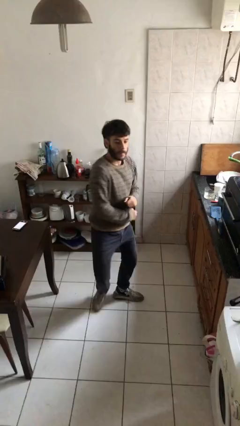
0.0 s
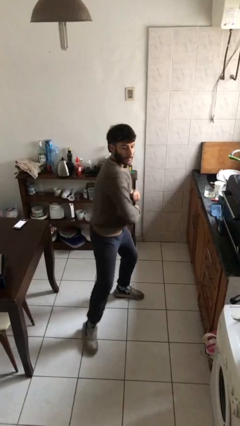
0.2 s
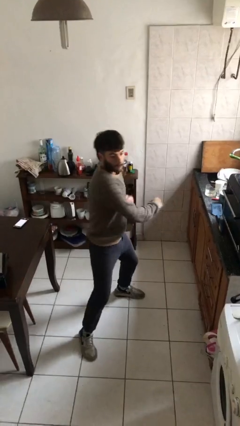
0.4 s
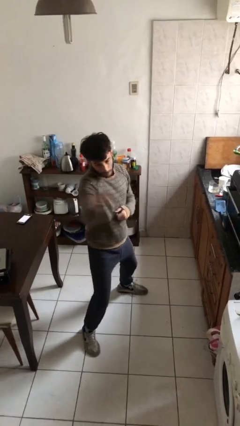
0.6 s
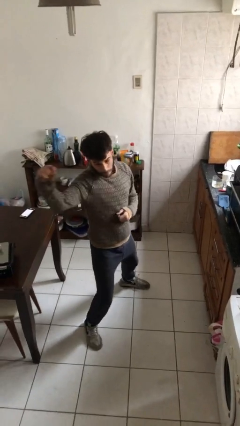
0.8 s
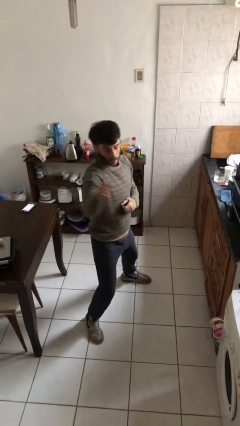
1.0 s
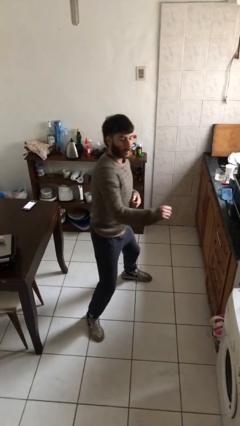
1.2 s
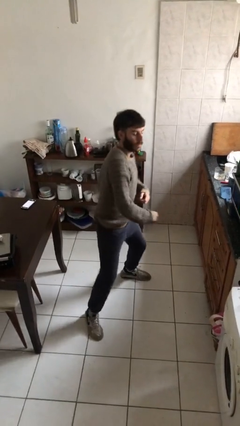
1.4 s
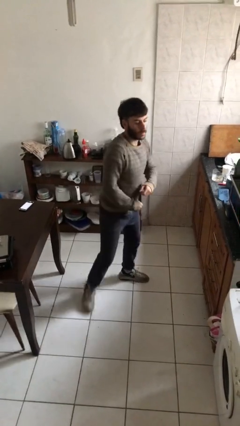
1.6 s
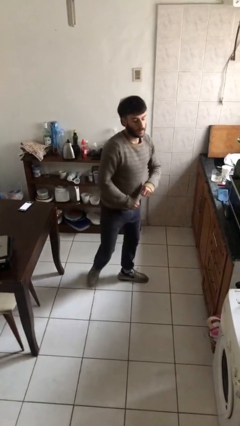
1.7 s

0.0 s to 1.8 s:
person karate chop

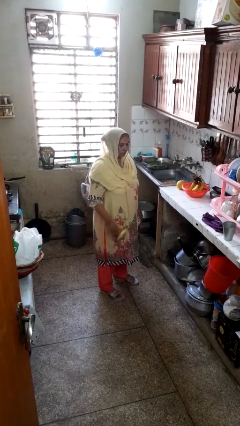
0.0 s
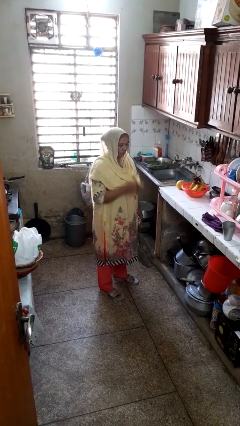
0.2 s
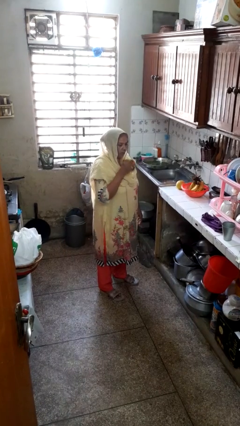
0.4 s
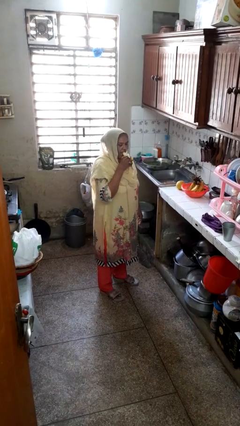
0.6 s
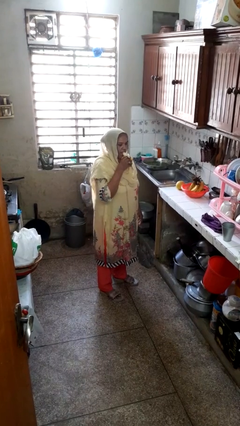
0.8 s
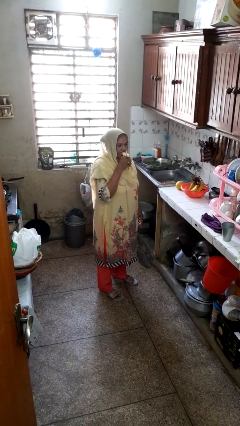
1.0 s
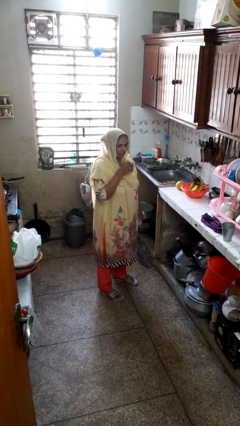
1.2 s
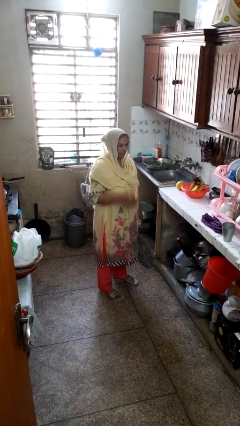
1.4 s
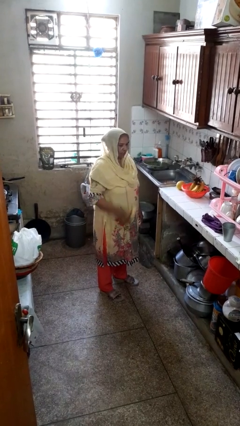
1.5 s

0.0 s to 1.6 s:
person eats banana

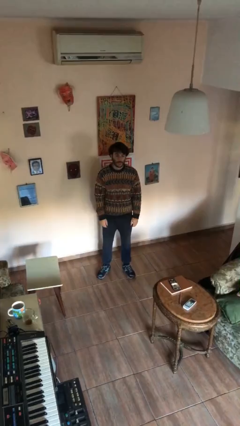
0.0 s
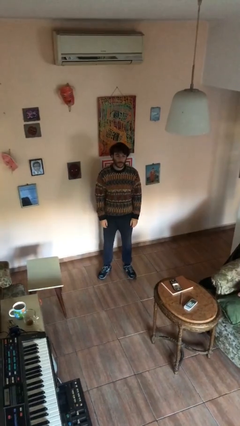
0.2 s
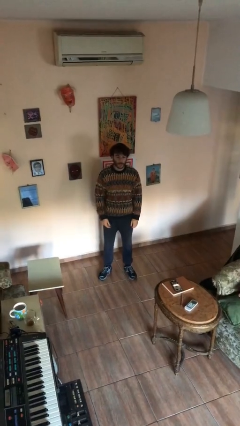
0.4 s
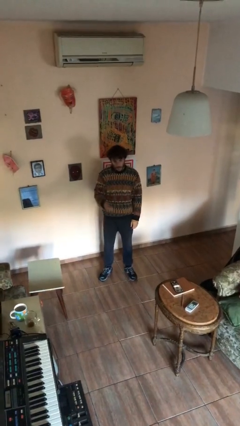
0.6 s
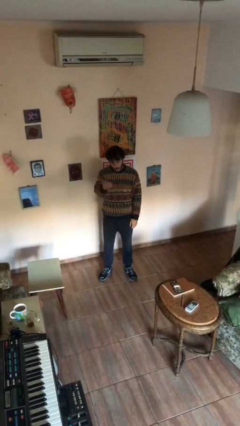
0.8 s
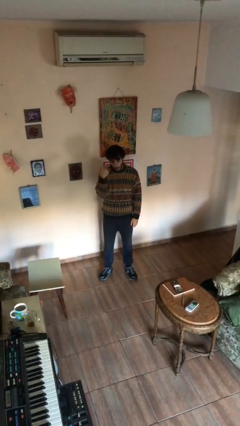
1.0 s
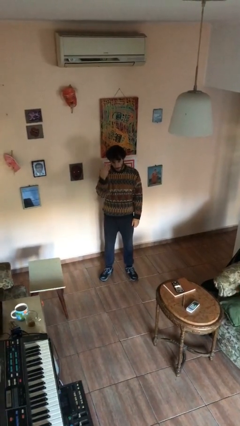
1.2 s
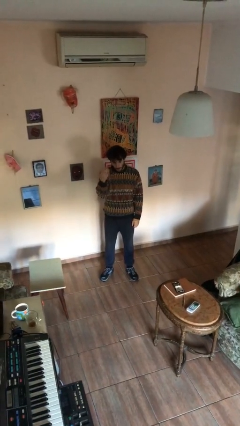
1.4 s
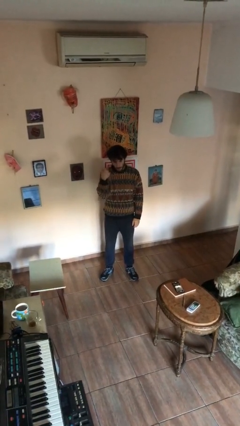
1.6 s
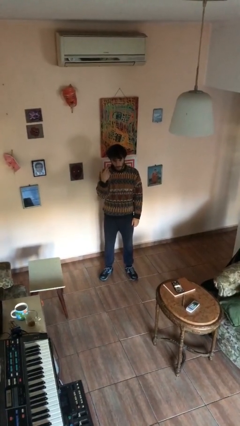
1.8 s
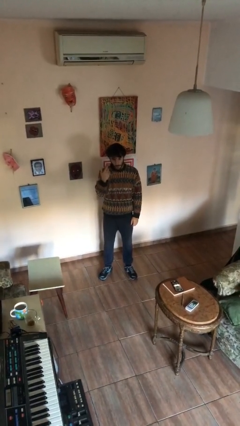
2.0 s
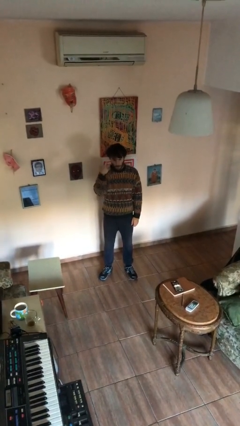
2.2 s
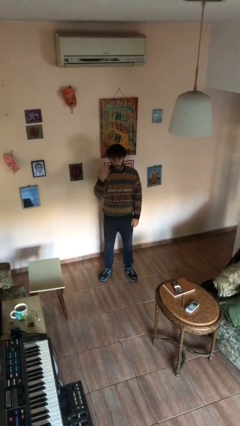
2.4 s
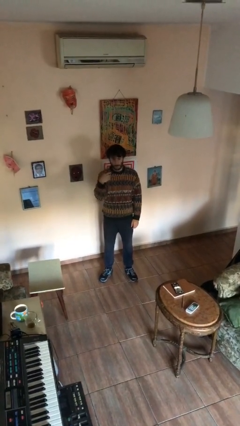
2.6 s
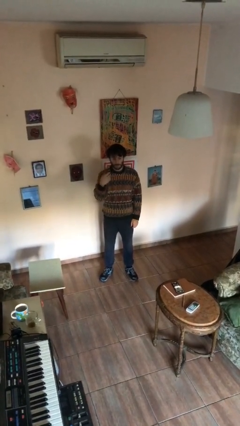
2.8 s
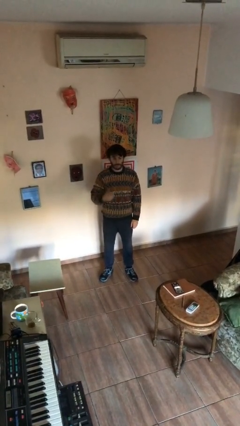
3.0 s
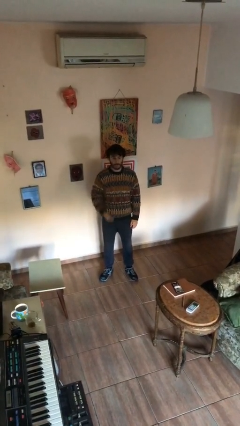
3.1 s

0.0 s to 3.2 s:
person gestures come here

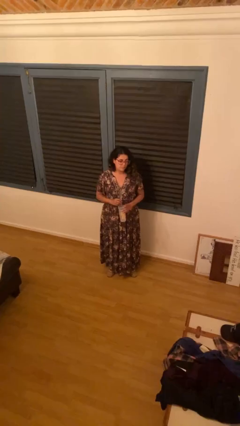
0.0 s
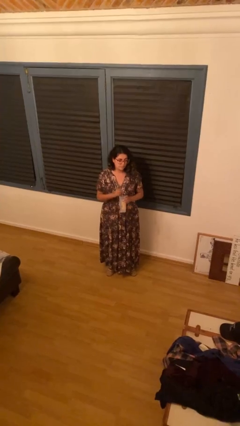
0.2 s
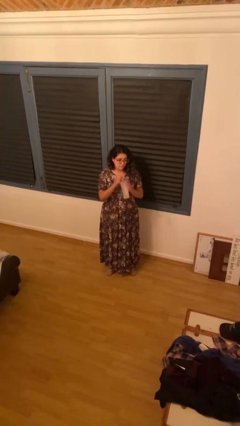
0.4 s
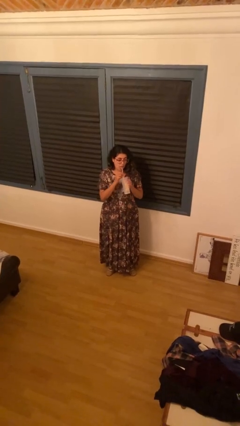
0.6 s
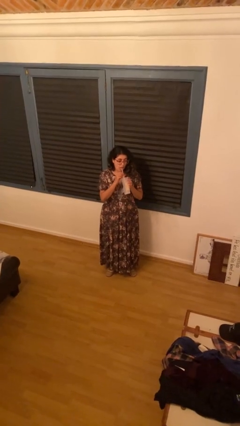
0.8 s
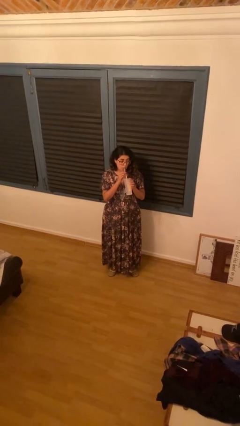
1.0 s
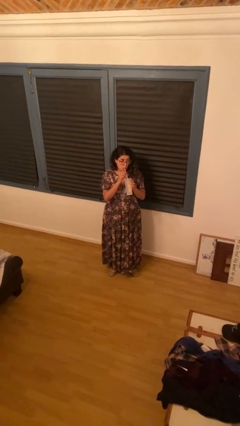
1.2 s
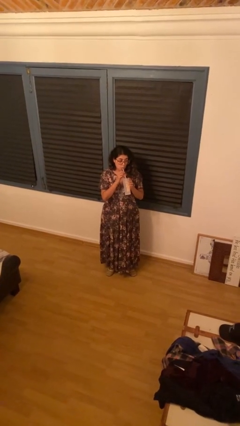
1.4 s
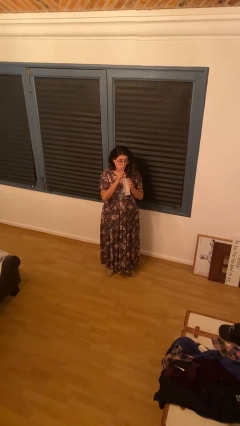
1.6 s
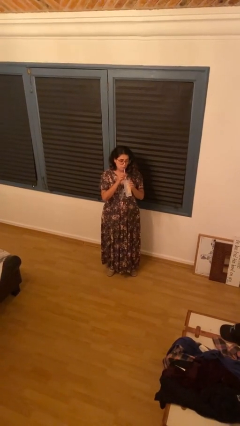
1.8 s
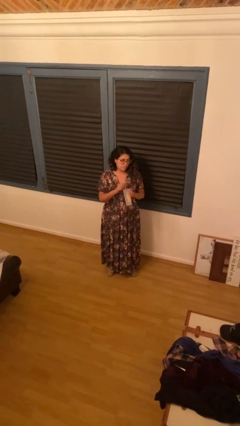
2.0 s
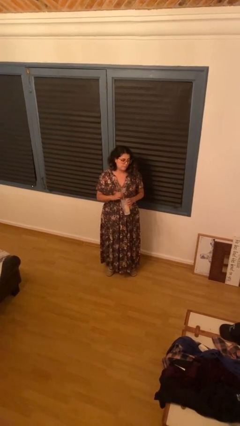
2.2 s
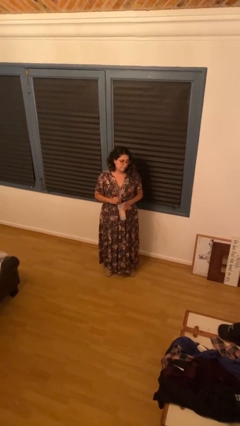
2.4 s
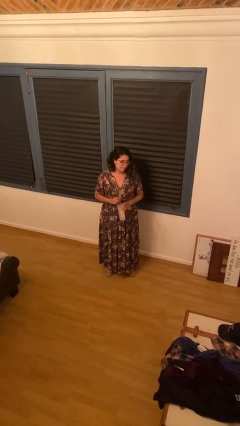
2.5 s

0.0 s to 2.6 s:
person drinks from straw

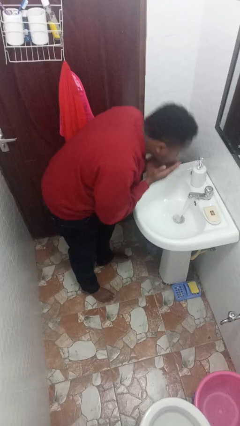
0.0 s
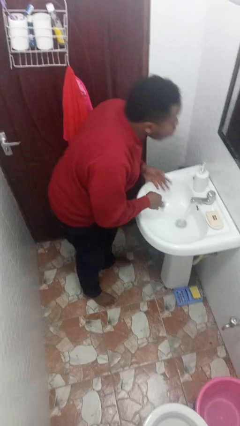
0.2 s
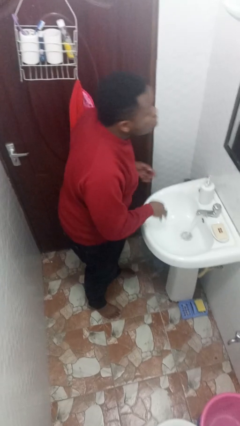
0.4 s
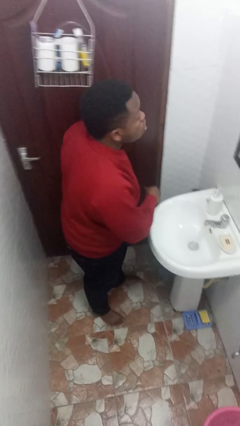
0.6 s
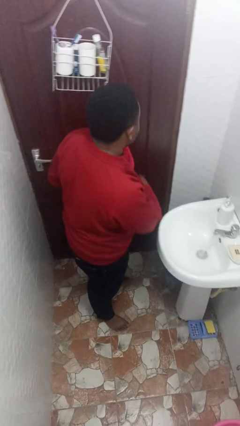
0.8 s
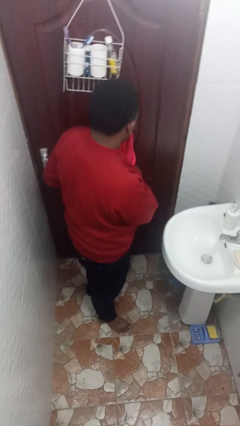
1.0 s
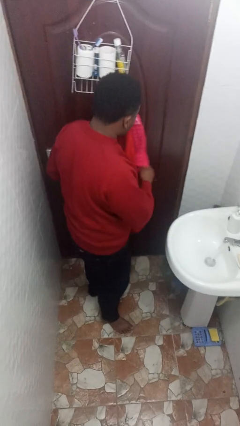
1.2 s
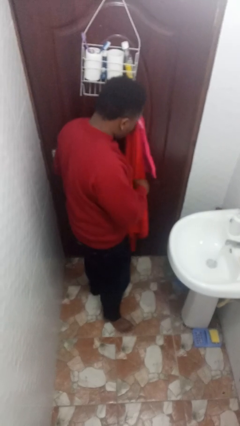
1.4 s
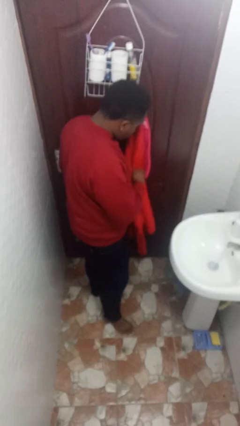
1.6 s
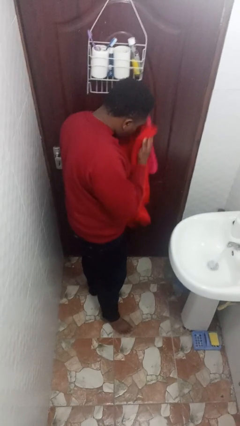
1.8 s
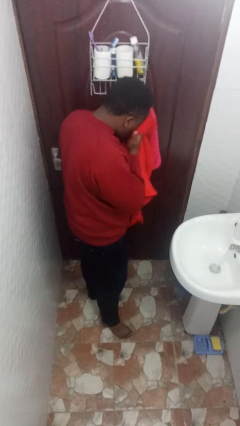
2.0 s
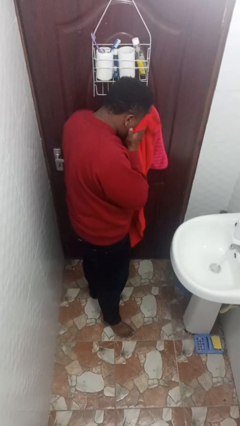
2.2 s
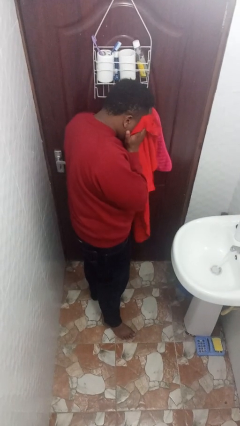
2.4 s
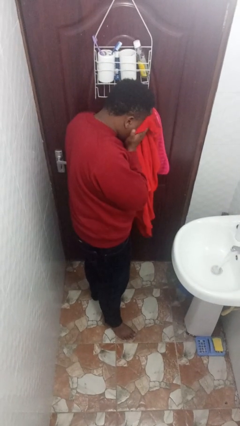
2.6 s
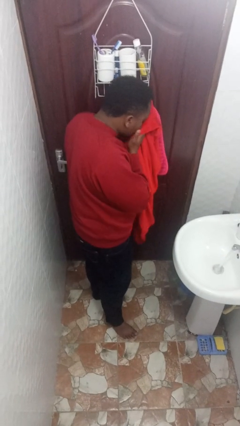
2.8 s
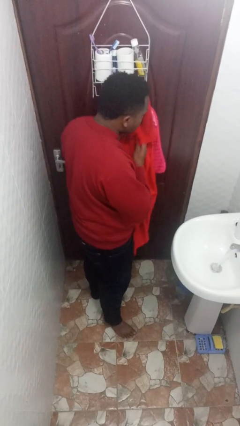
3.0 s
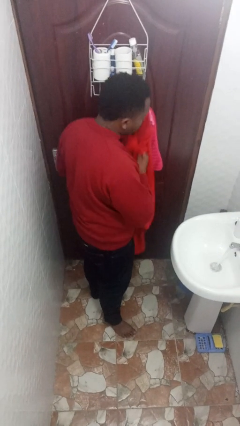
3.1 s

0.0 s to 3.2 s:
person dries face with towel

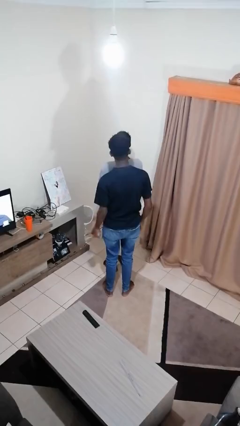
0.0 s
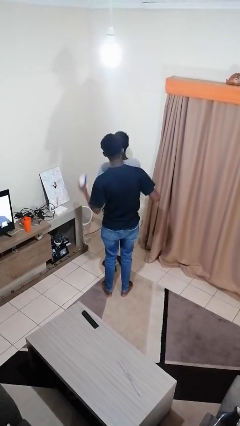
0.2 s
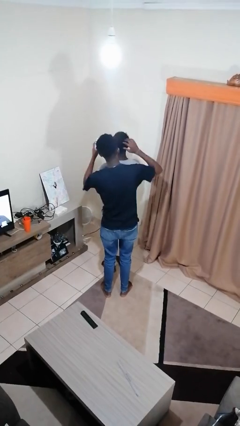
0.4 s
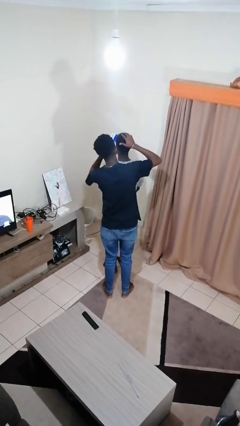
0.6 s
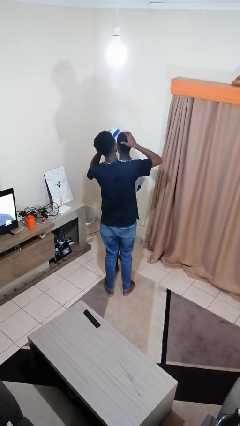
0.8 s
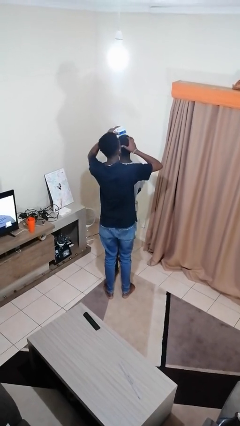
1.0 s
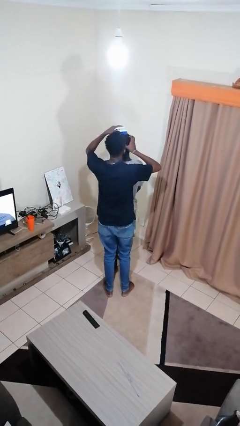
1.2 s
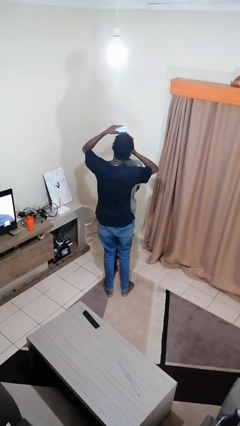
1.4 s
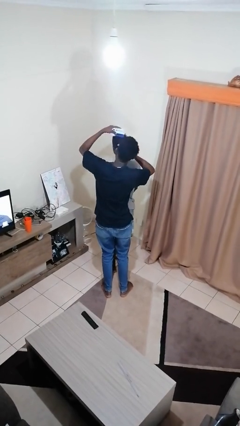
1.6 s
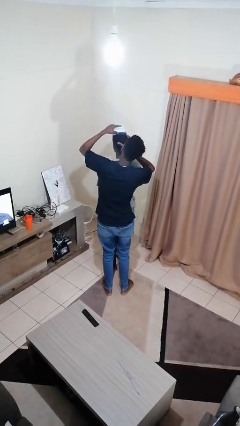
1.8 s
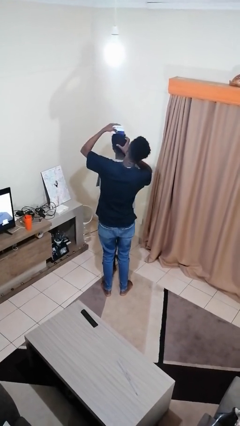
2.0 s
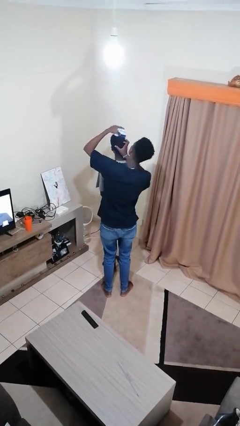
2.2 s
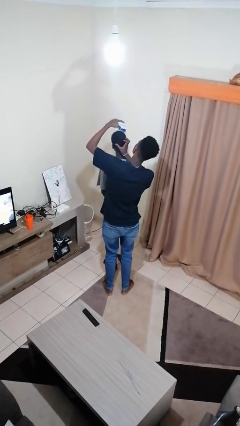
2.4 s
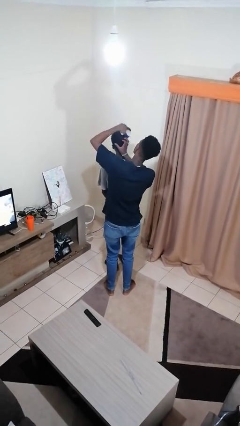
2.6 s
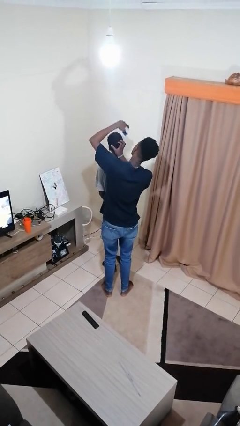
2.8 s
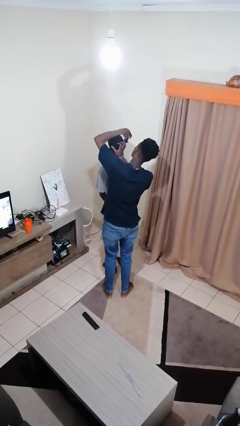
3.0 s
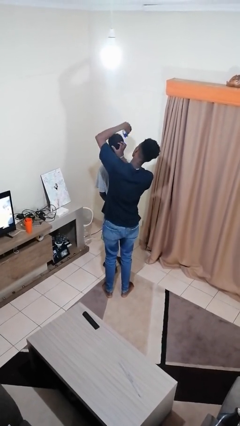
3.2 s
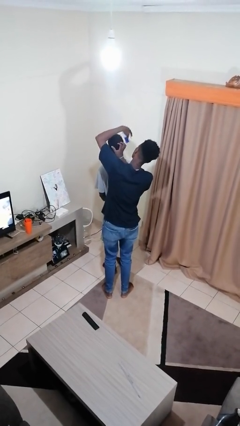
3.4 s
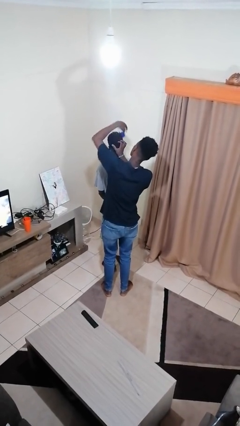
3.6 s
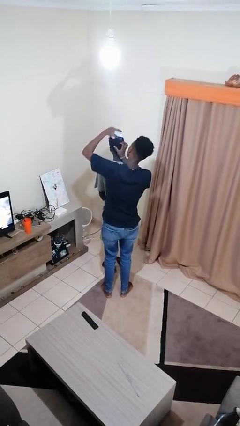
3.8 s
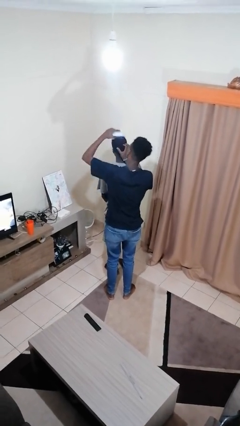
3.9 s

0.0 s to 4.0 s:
person brushes hair of person

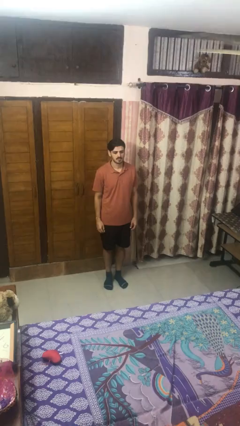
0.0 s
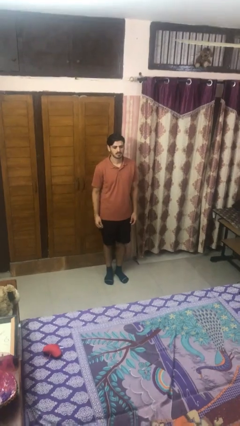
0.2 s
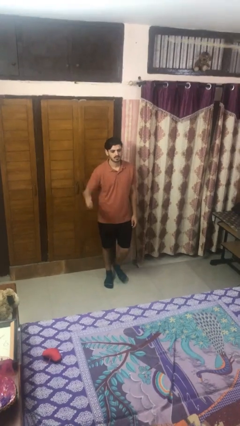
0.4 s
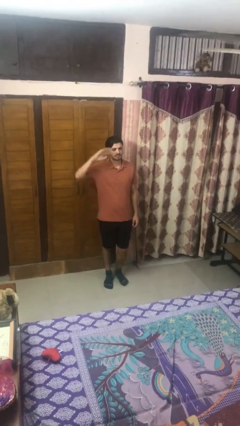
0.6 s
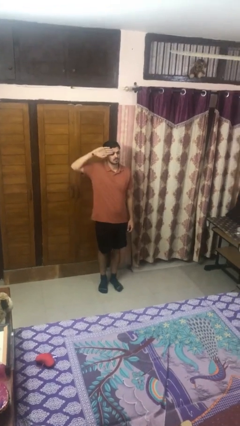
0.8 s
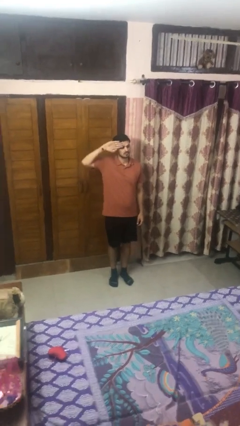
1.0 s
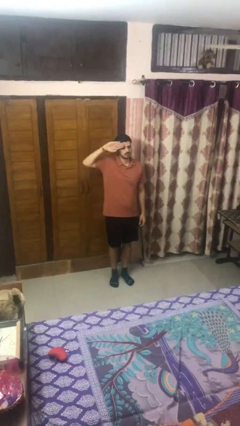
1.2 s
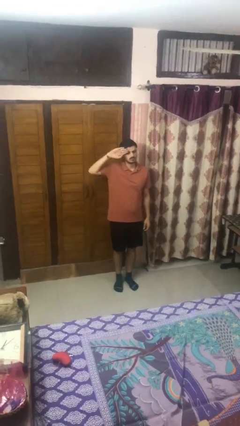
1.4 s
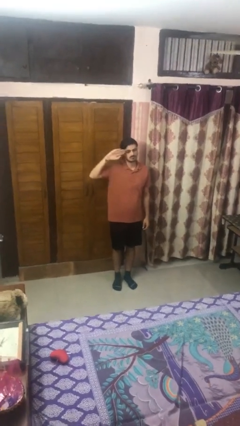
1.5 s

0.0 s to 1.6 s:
person salutes
